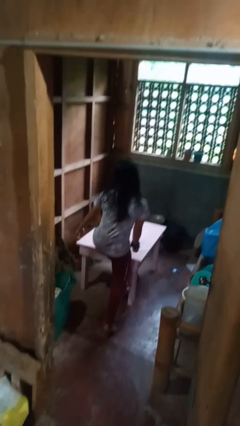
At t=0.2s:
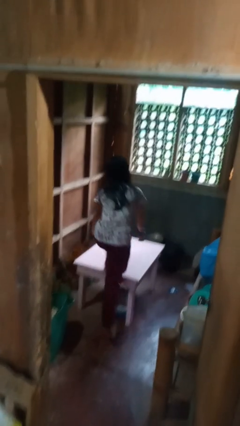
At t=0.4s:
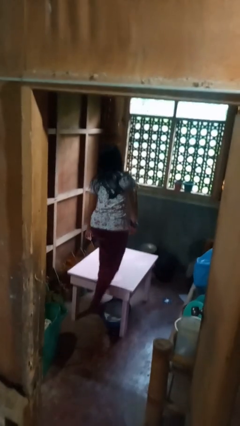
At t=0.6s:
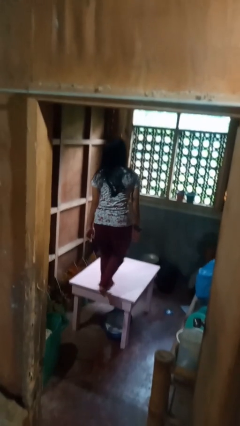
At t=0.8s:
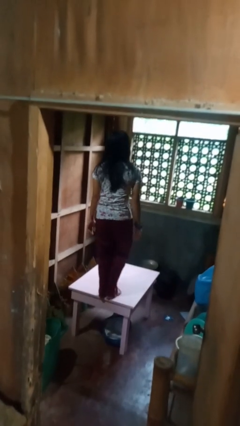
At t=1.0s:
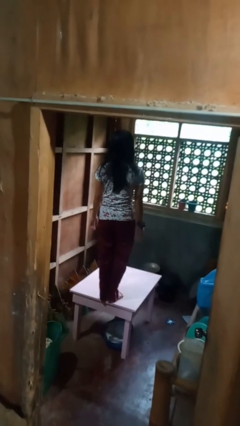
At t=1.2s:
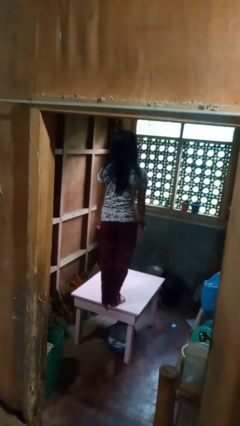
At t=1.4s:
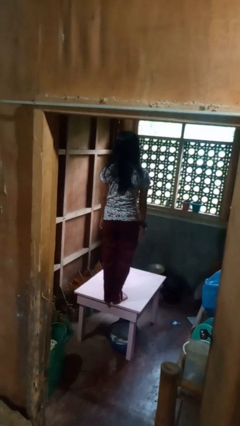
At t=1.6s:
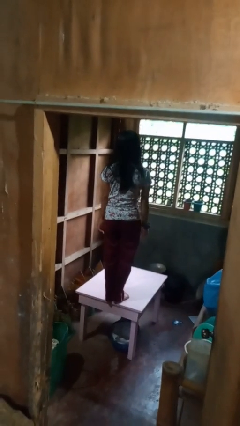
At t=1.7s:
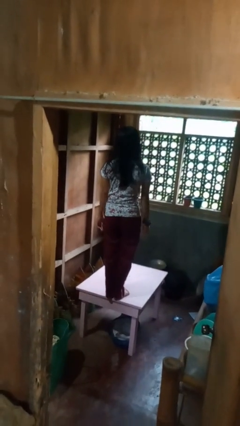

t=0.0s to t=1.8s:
person climbs on table

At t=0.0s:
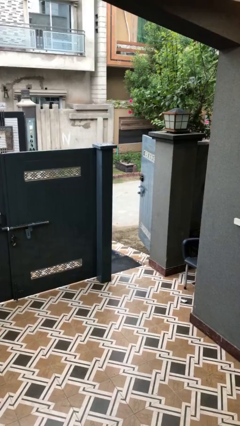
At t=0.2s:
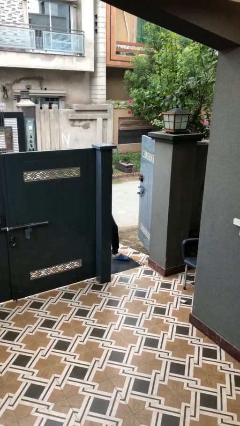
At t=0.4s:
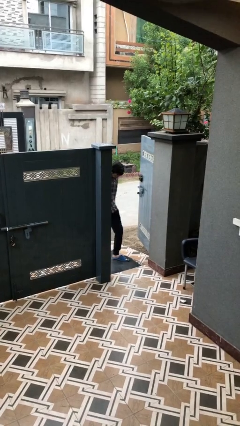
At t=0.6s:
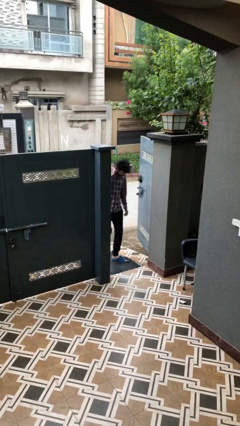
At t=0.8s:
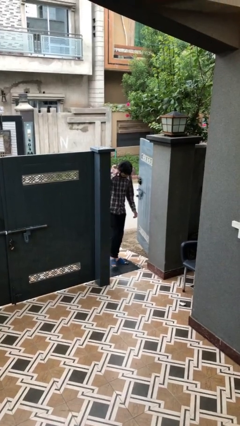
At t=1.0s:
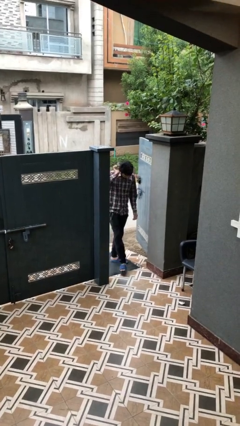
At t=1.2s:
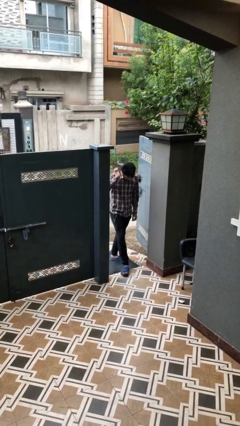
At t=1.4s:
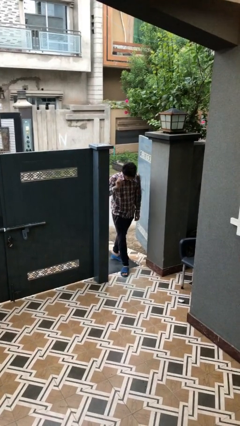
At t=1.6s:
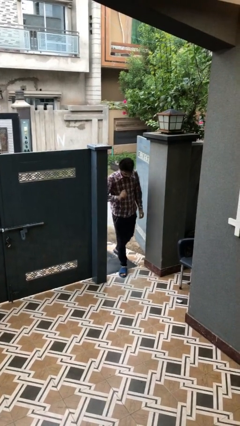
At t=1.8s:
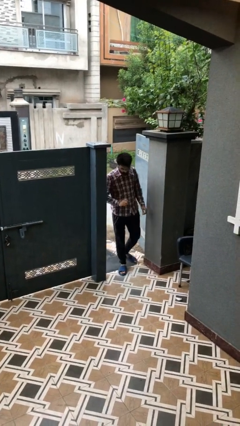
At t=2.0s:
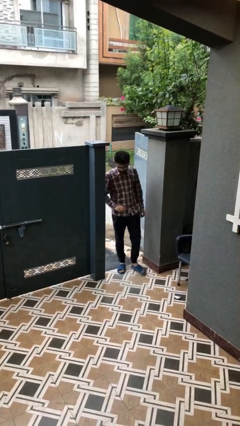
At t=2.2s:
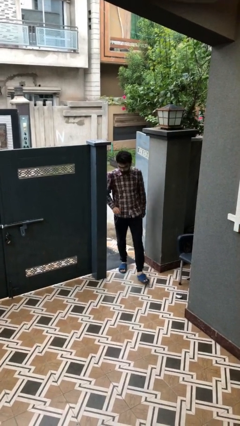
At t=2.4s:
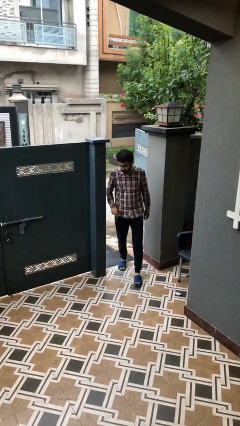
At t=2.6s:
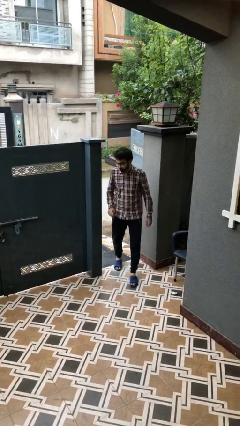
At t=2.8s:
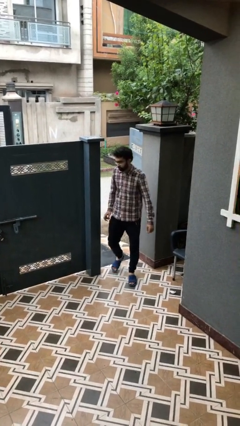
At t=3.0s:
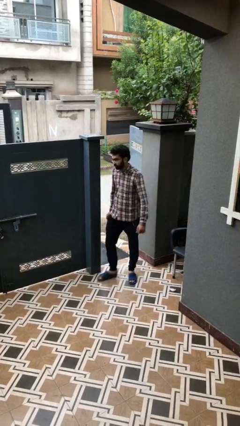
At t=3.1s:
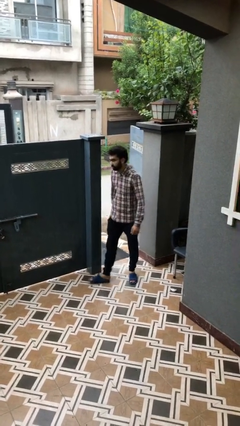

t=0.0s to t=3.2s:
person enters scene through structure

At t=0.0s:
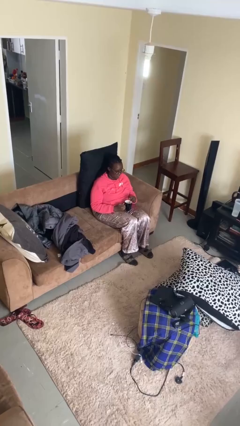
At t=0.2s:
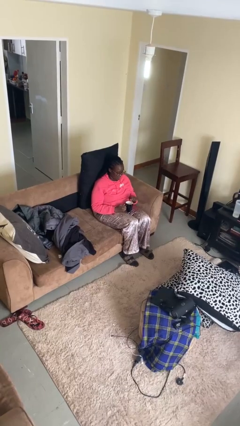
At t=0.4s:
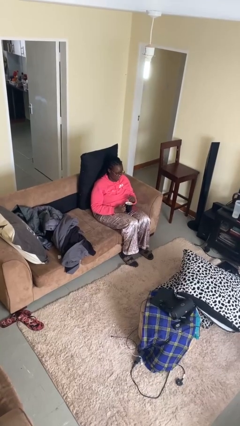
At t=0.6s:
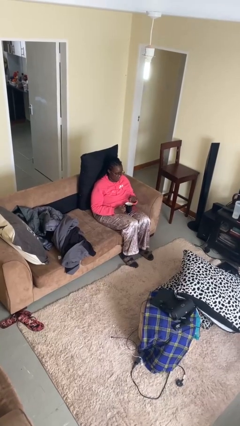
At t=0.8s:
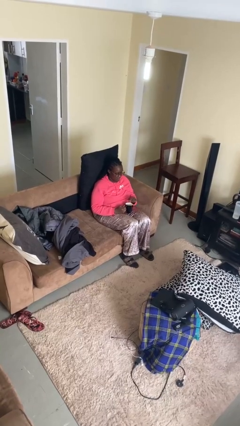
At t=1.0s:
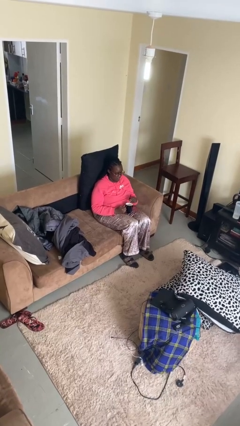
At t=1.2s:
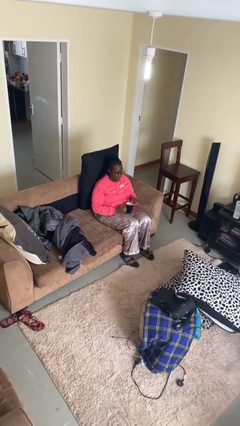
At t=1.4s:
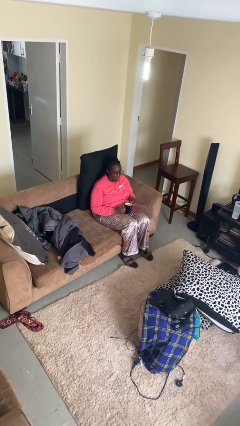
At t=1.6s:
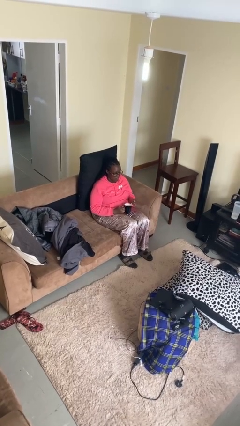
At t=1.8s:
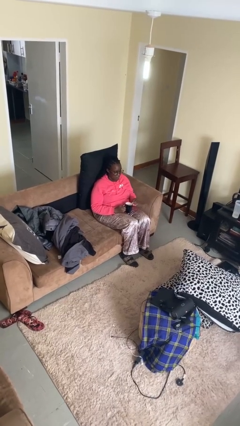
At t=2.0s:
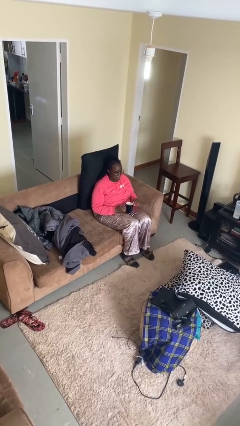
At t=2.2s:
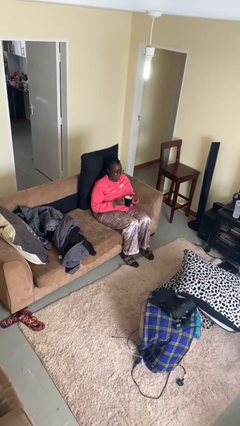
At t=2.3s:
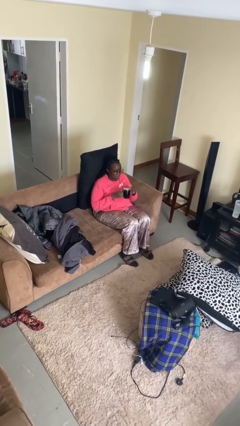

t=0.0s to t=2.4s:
person stirs mug

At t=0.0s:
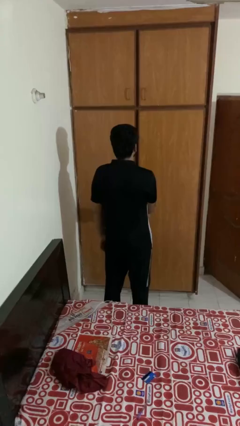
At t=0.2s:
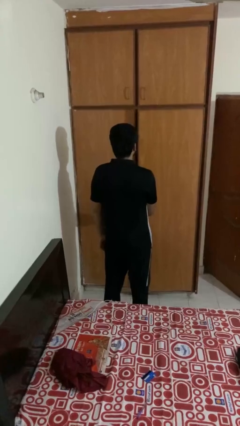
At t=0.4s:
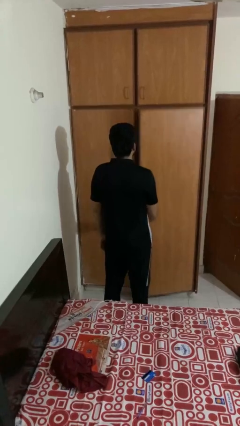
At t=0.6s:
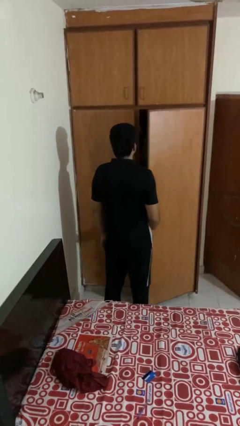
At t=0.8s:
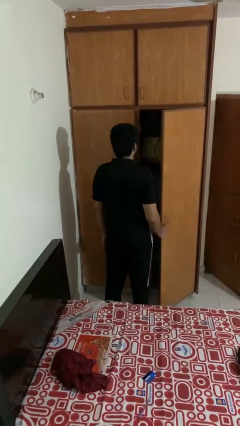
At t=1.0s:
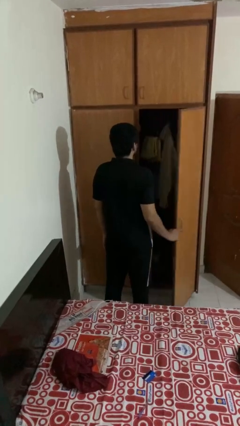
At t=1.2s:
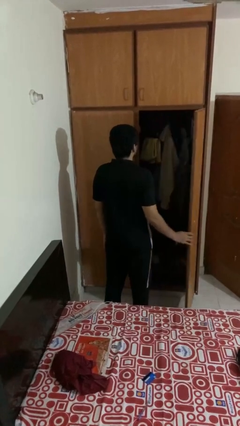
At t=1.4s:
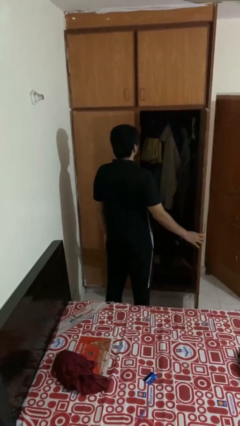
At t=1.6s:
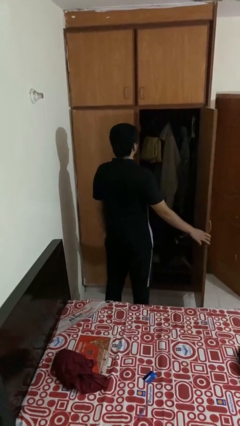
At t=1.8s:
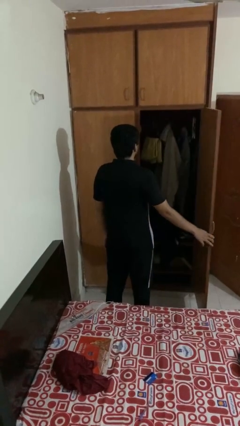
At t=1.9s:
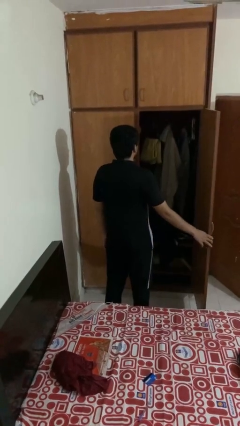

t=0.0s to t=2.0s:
person opens closet door

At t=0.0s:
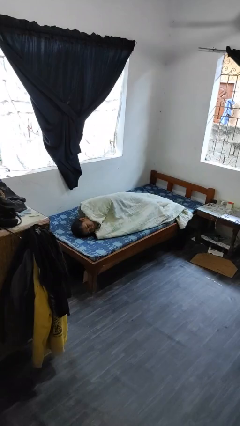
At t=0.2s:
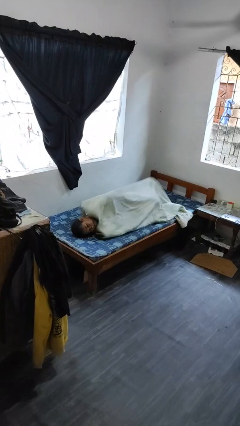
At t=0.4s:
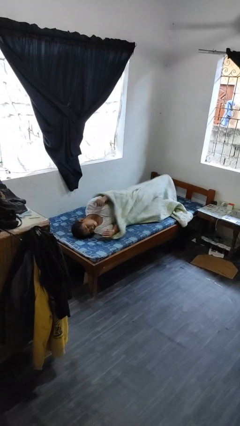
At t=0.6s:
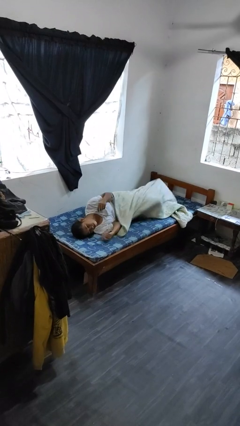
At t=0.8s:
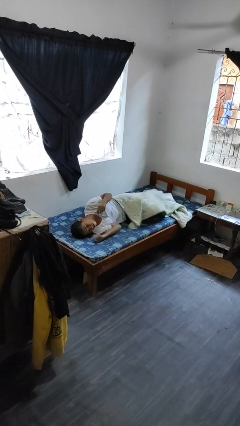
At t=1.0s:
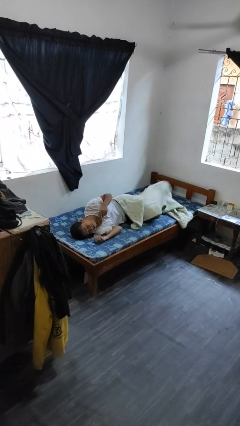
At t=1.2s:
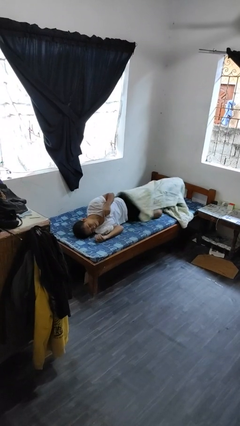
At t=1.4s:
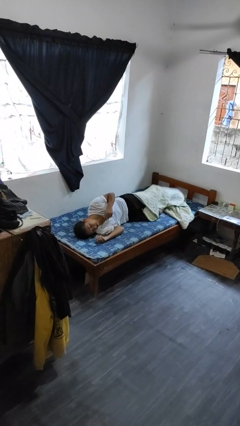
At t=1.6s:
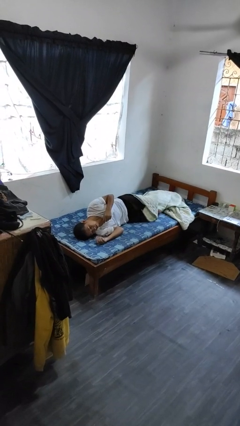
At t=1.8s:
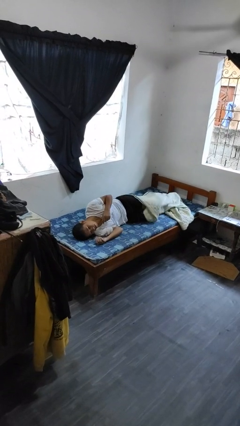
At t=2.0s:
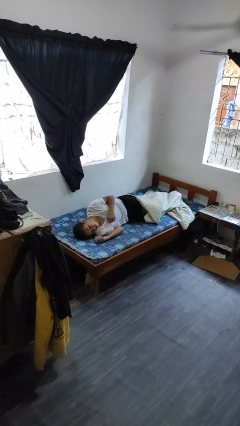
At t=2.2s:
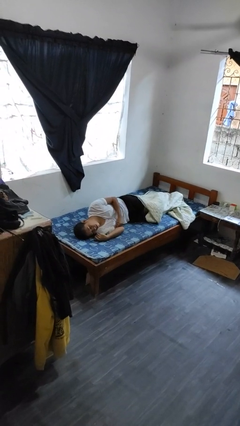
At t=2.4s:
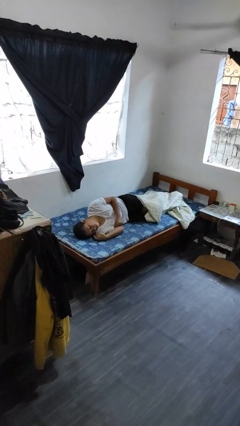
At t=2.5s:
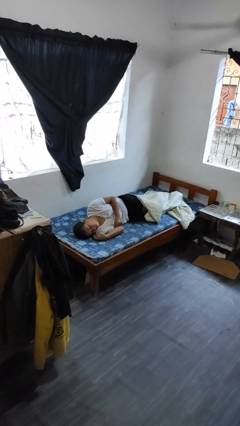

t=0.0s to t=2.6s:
person uncovers with bedsheets

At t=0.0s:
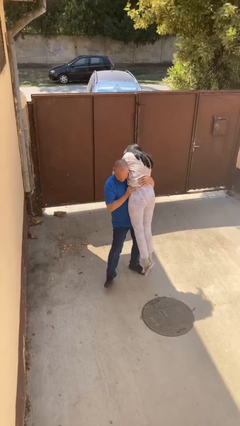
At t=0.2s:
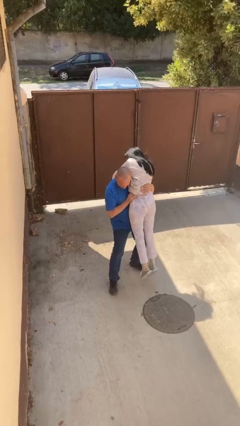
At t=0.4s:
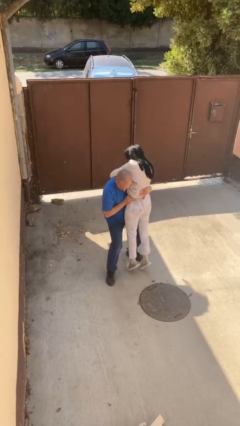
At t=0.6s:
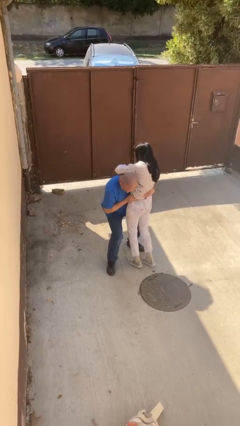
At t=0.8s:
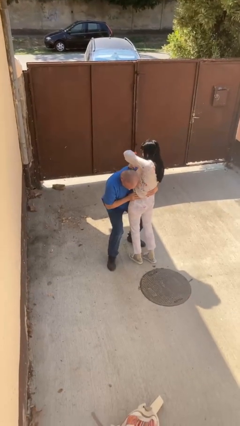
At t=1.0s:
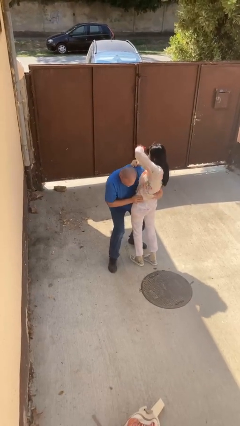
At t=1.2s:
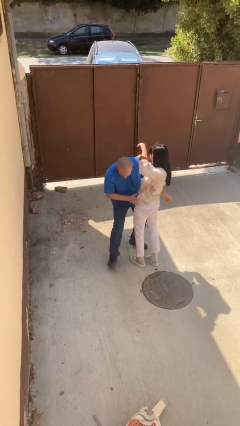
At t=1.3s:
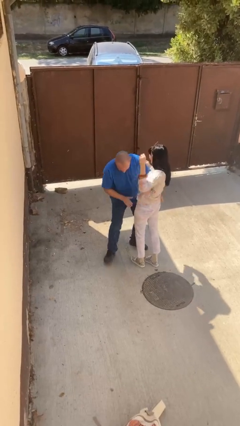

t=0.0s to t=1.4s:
person puts down person

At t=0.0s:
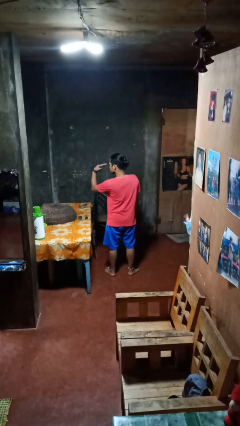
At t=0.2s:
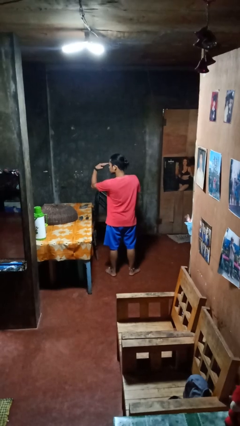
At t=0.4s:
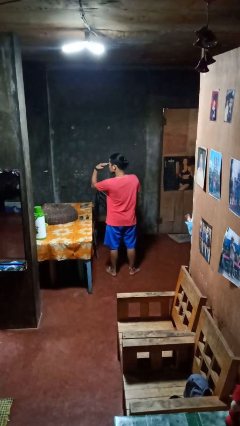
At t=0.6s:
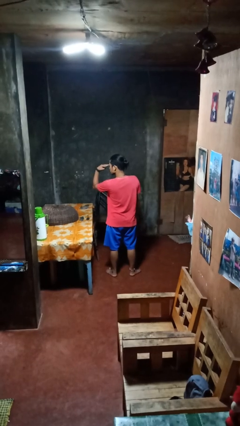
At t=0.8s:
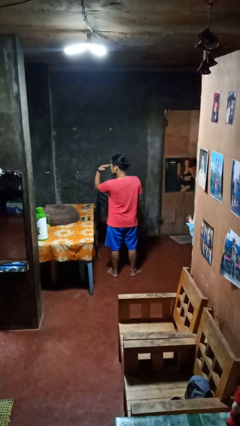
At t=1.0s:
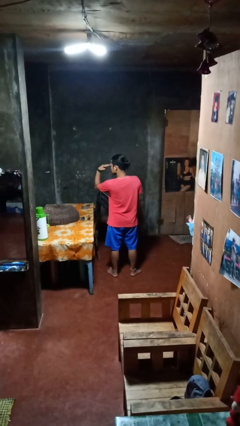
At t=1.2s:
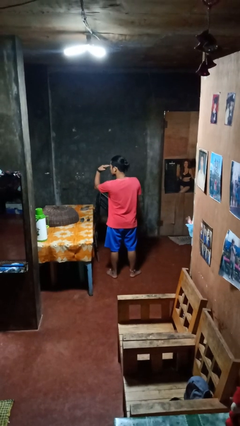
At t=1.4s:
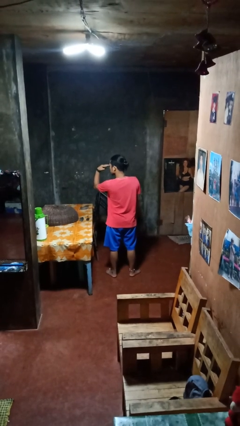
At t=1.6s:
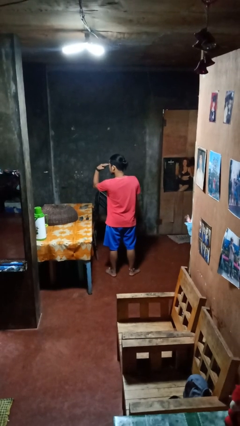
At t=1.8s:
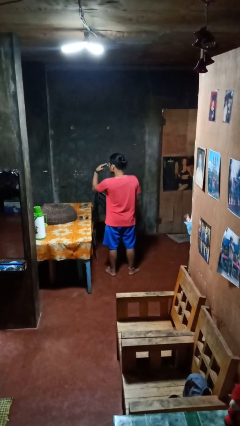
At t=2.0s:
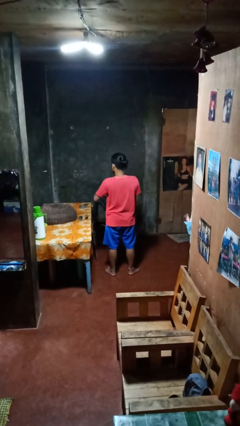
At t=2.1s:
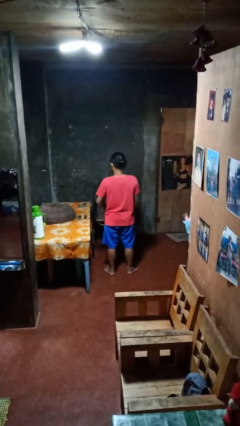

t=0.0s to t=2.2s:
person gestures watch closely

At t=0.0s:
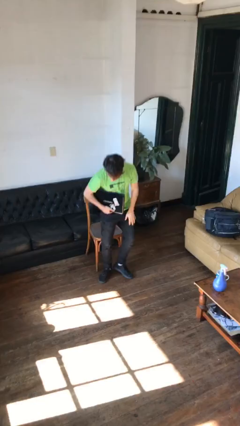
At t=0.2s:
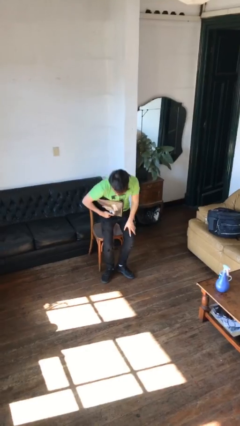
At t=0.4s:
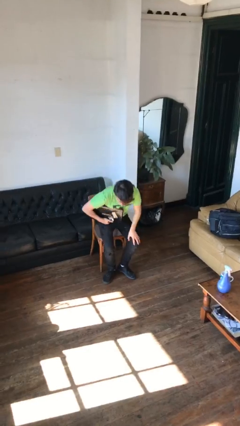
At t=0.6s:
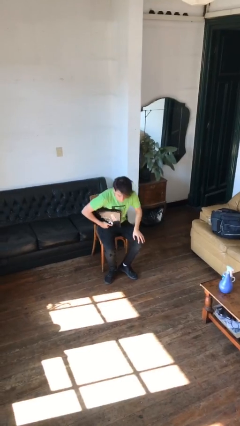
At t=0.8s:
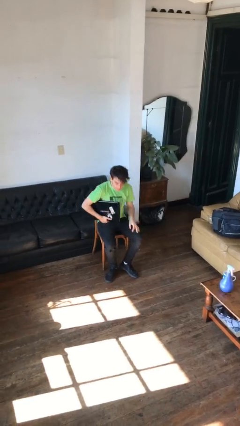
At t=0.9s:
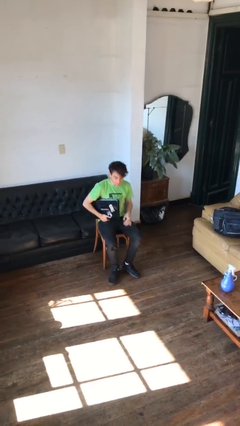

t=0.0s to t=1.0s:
person sits down

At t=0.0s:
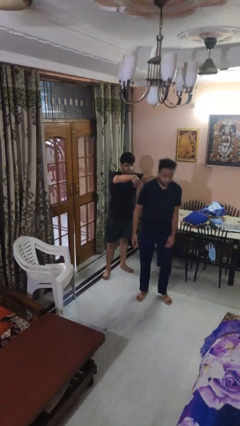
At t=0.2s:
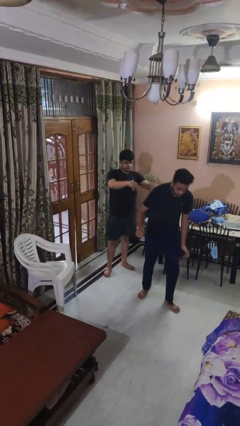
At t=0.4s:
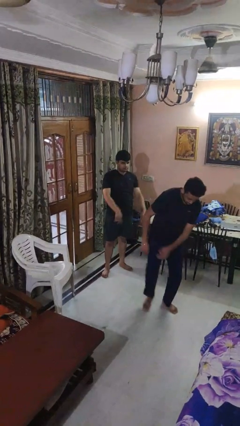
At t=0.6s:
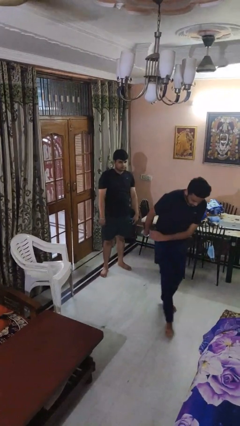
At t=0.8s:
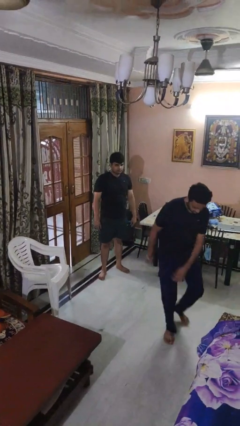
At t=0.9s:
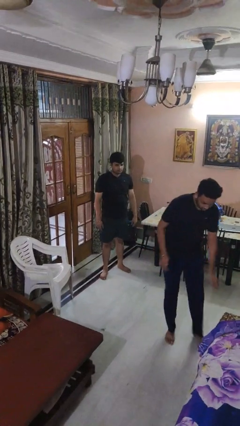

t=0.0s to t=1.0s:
person shoves person
